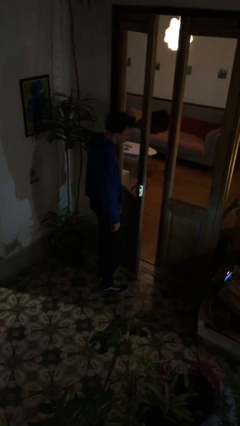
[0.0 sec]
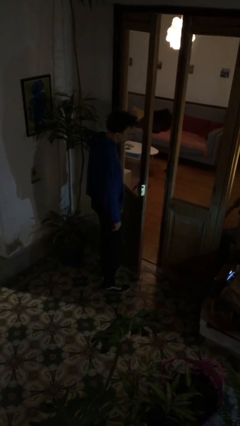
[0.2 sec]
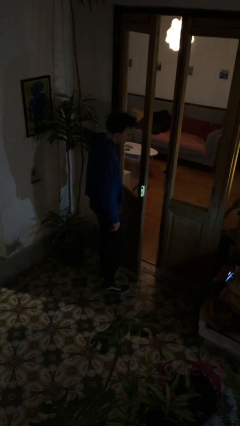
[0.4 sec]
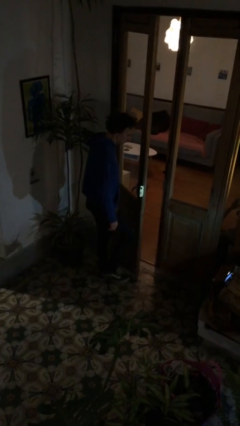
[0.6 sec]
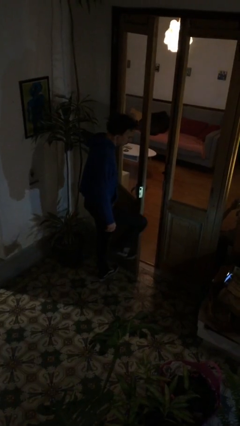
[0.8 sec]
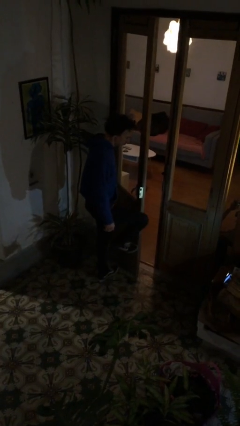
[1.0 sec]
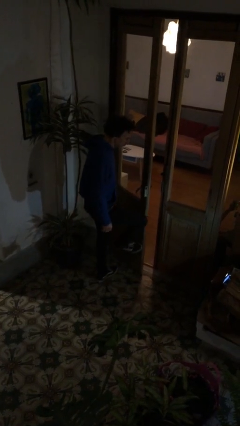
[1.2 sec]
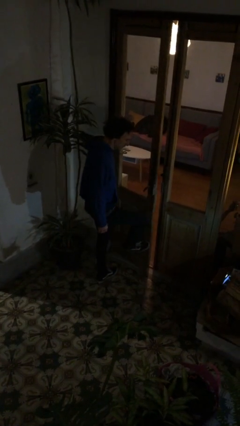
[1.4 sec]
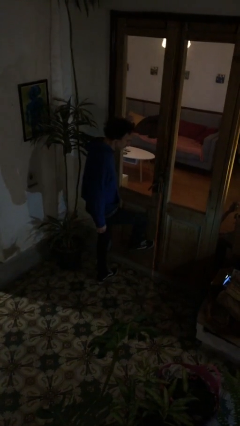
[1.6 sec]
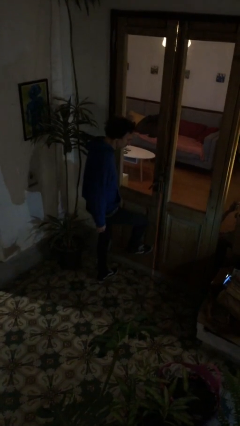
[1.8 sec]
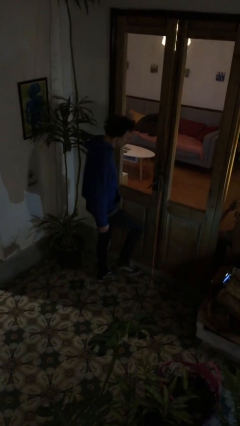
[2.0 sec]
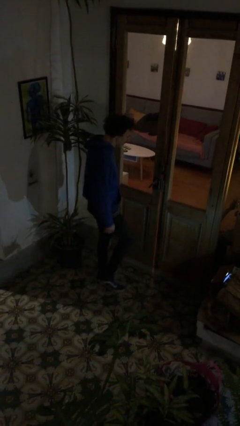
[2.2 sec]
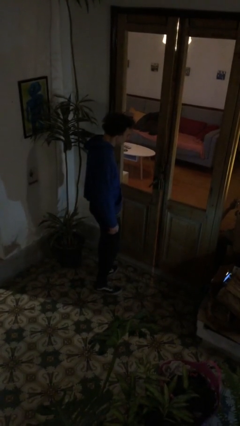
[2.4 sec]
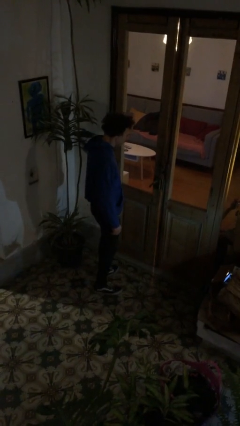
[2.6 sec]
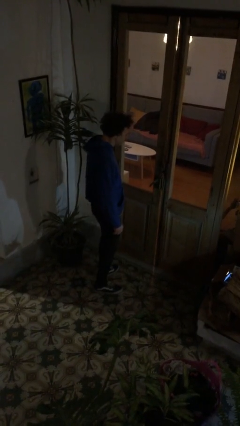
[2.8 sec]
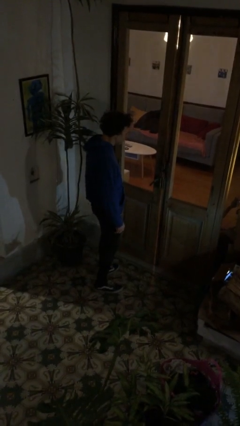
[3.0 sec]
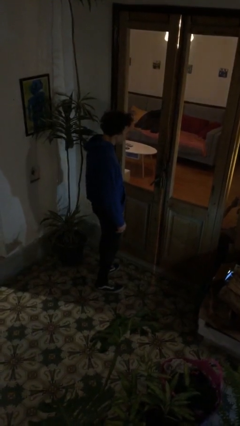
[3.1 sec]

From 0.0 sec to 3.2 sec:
person closes door with foot

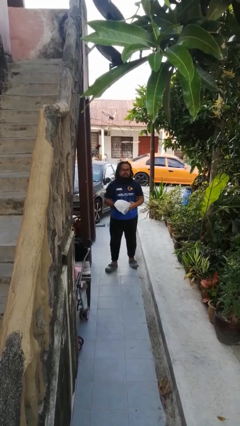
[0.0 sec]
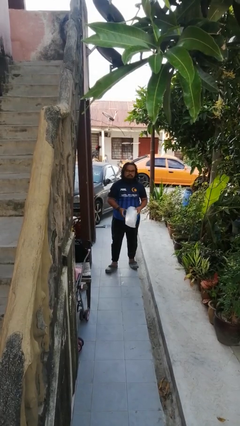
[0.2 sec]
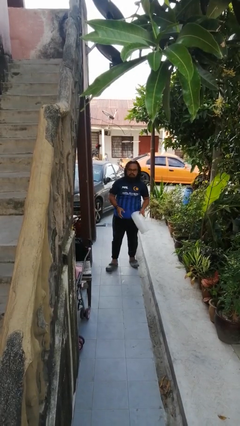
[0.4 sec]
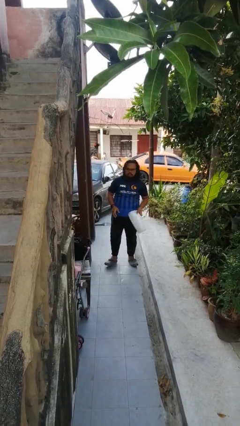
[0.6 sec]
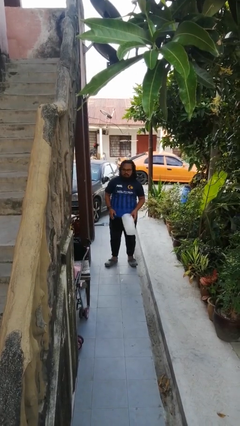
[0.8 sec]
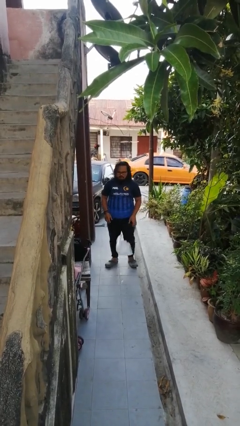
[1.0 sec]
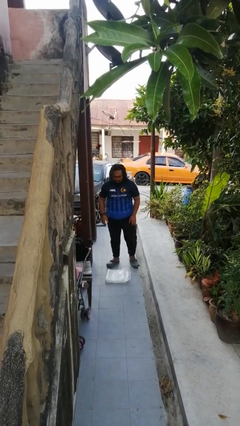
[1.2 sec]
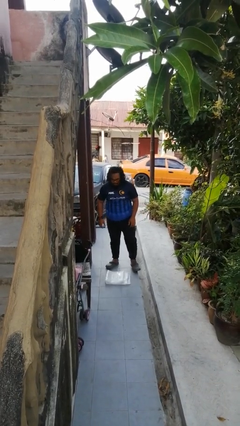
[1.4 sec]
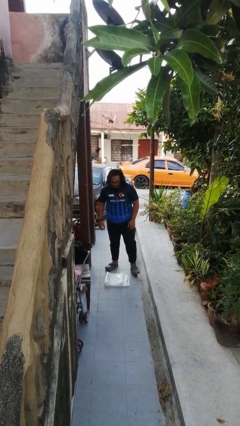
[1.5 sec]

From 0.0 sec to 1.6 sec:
person drops object

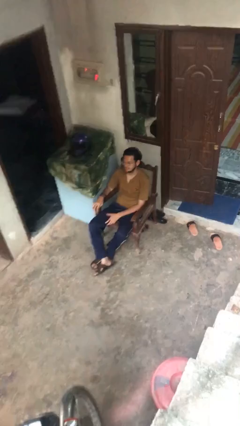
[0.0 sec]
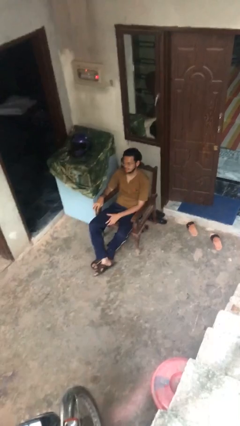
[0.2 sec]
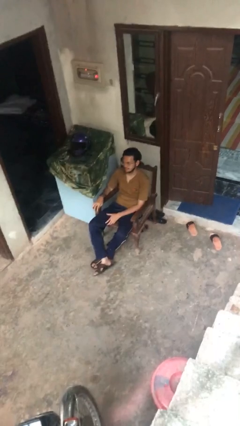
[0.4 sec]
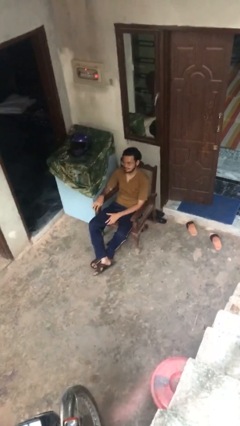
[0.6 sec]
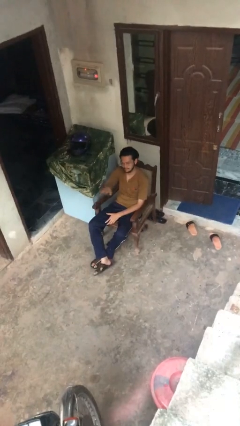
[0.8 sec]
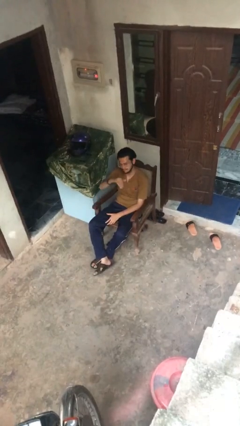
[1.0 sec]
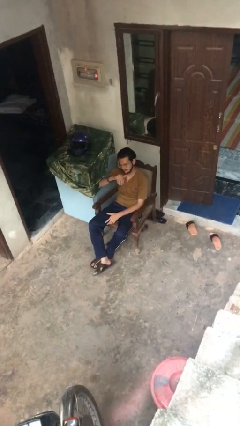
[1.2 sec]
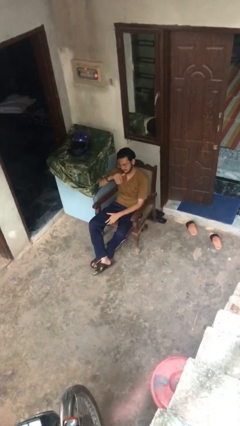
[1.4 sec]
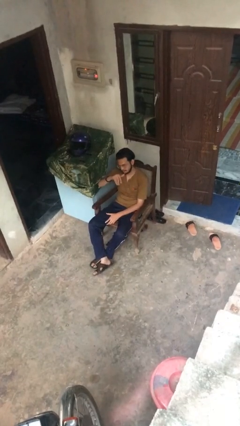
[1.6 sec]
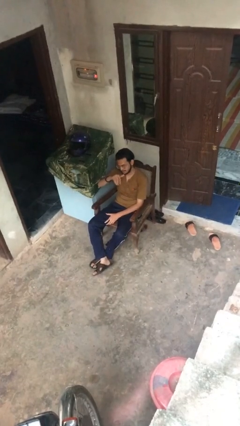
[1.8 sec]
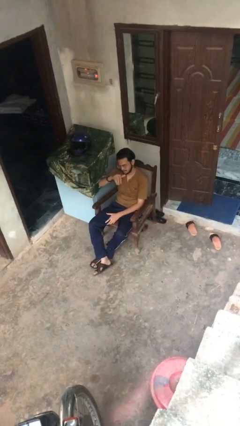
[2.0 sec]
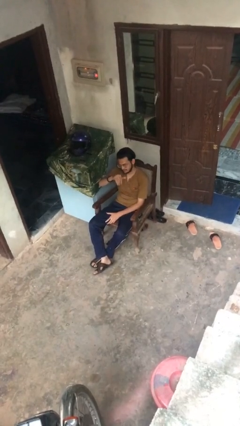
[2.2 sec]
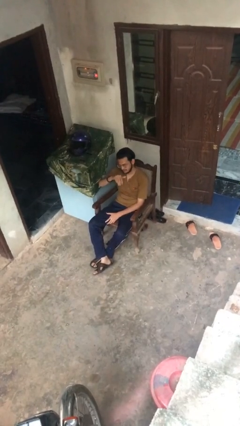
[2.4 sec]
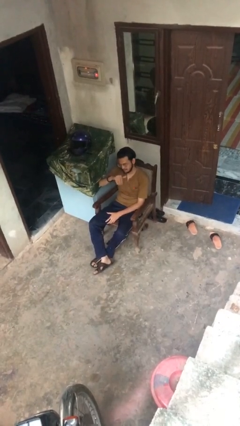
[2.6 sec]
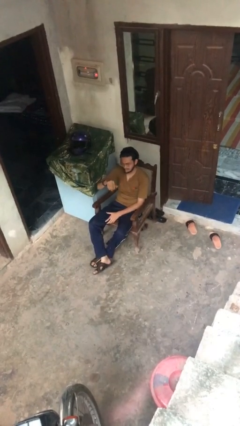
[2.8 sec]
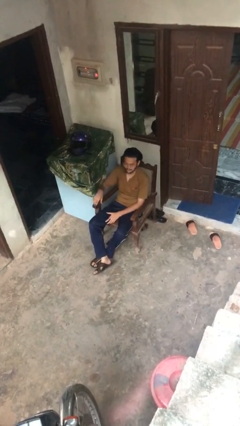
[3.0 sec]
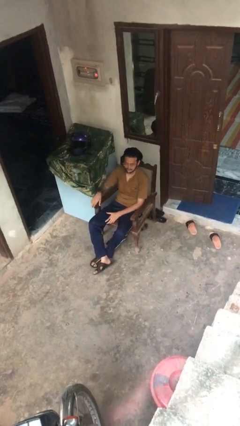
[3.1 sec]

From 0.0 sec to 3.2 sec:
person gestures come here

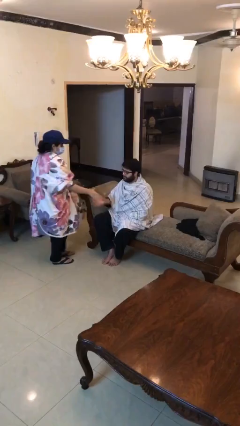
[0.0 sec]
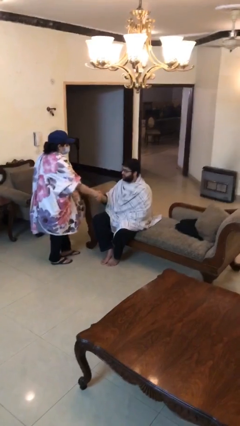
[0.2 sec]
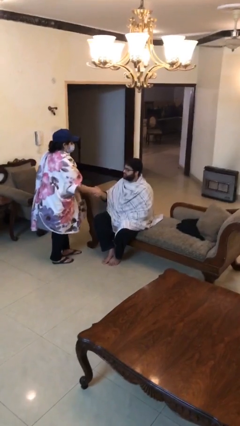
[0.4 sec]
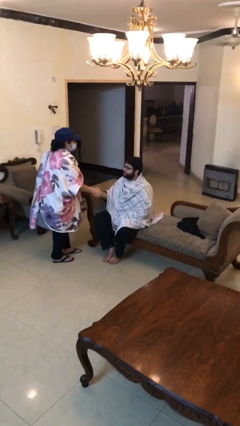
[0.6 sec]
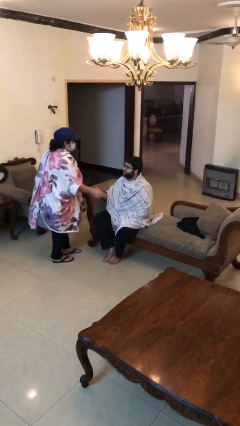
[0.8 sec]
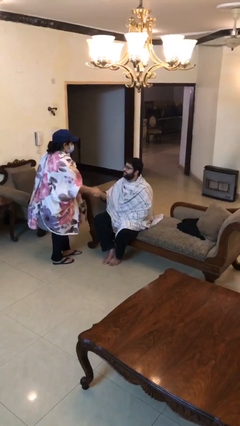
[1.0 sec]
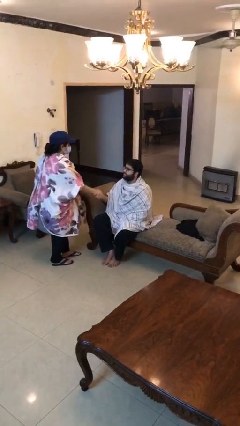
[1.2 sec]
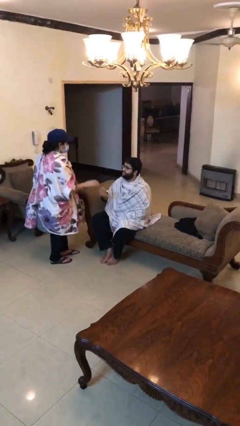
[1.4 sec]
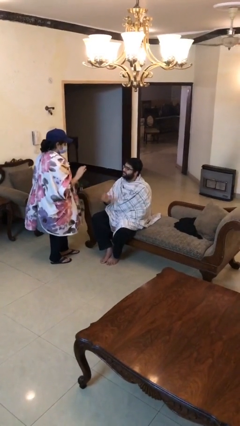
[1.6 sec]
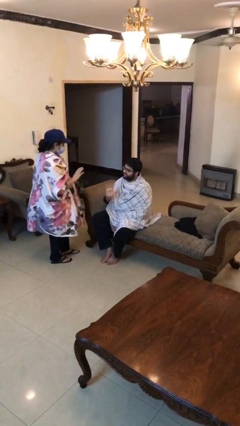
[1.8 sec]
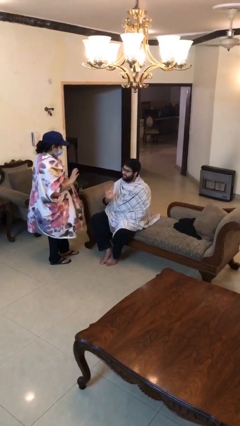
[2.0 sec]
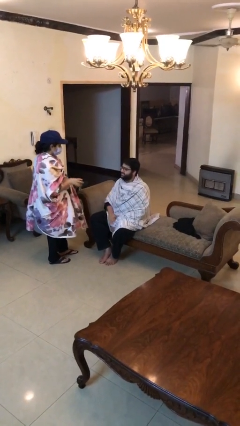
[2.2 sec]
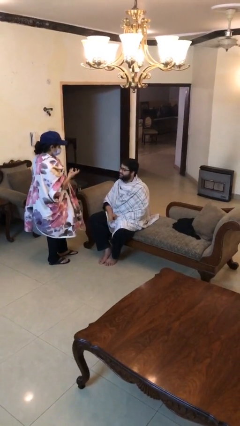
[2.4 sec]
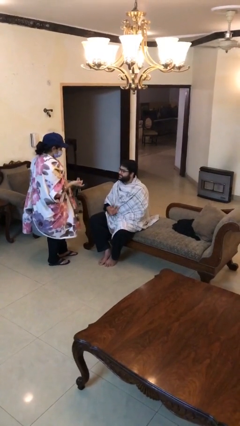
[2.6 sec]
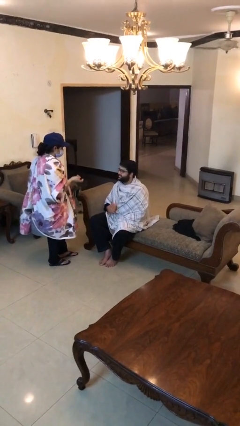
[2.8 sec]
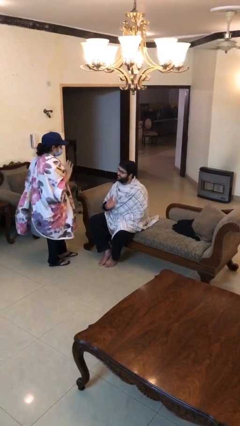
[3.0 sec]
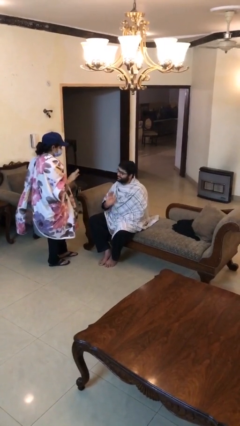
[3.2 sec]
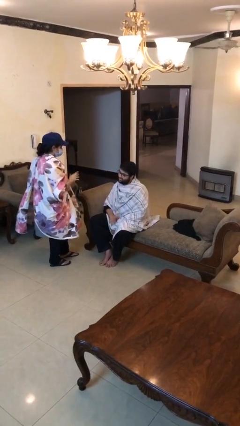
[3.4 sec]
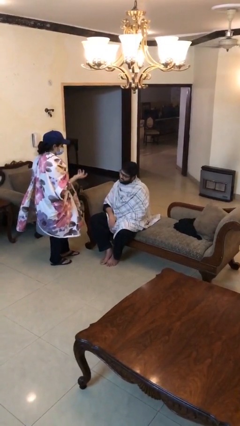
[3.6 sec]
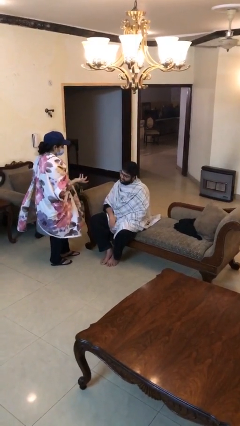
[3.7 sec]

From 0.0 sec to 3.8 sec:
person shakes hand

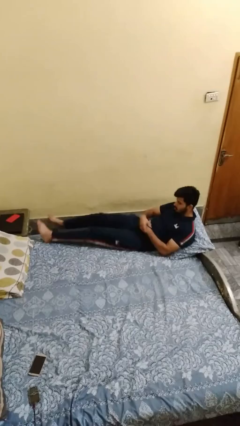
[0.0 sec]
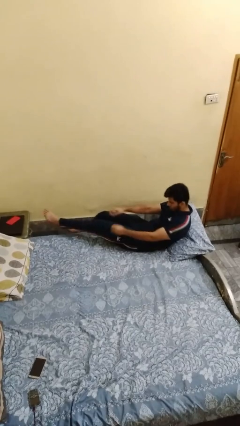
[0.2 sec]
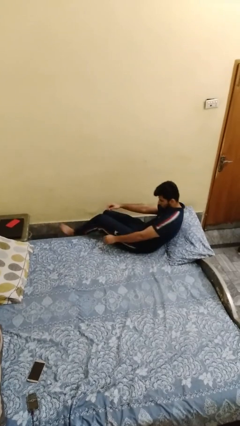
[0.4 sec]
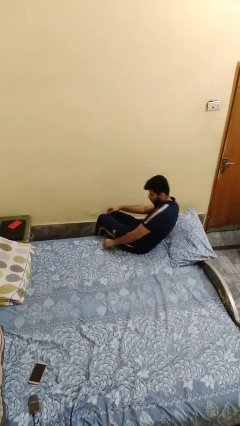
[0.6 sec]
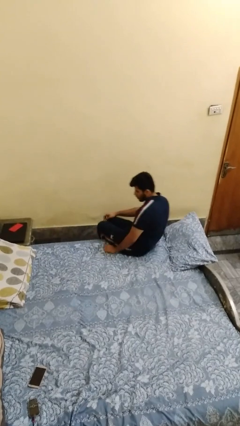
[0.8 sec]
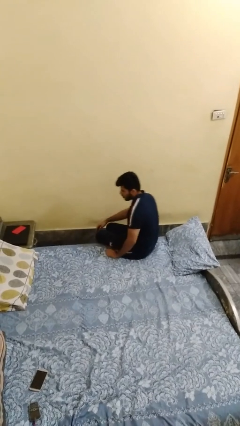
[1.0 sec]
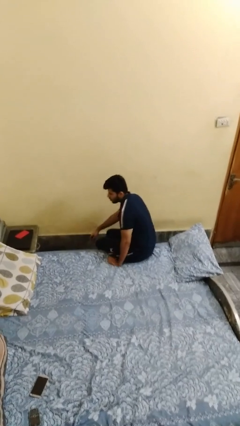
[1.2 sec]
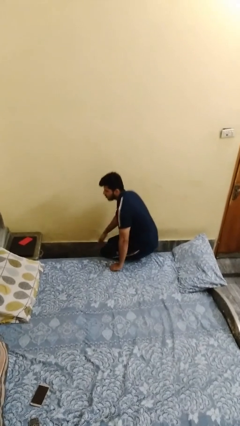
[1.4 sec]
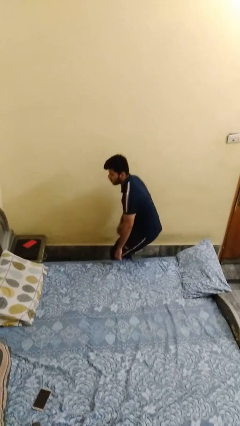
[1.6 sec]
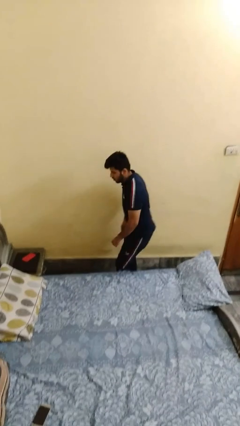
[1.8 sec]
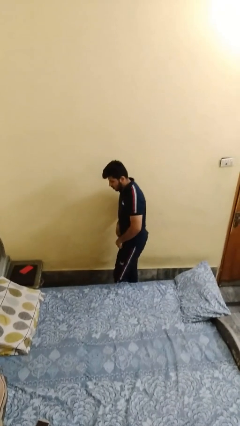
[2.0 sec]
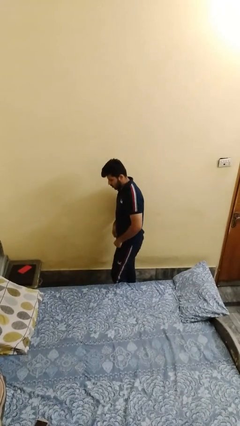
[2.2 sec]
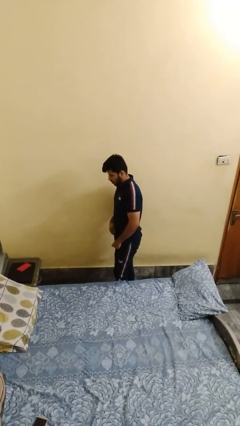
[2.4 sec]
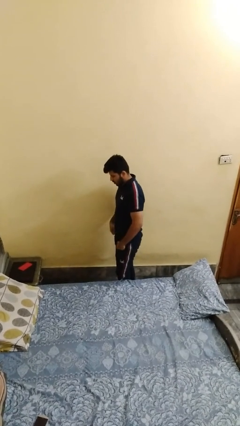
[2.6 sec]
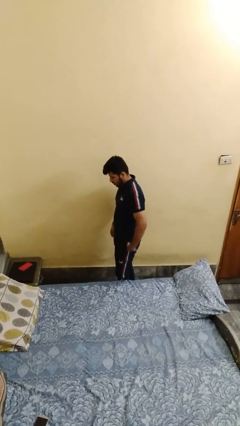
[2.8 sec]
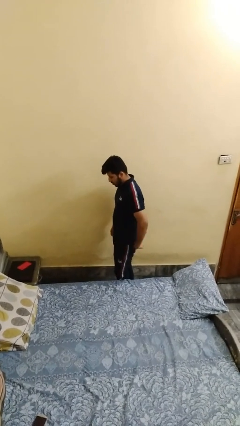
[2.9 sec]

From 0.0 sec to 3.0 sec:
person stands up

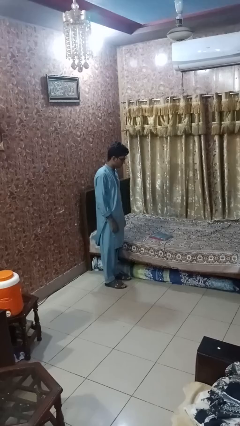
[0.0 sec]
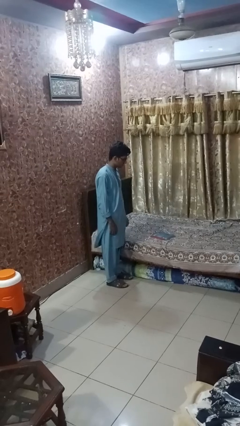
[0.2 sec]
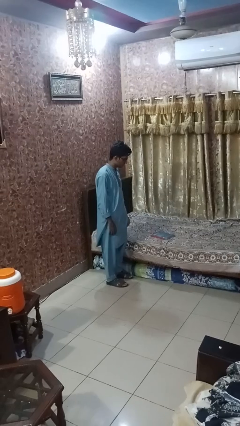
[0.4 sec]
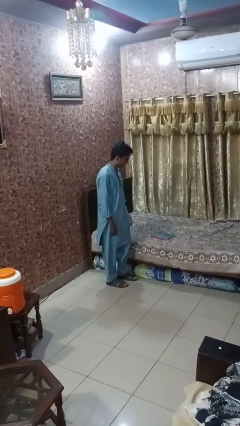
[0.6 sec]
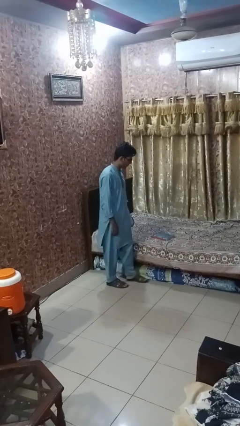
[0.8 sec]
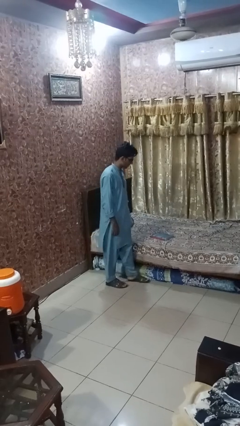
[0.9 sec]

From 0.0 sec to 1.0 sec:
person puts down object on bed

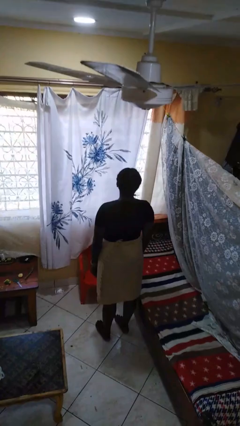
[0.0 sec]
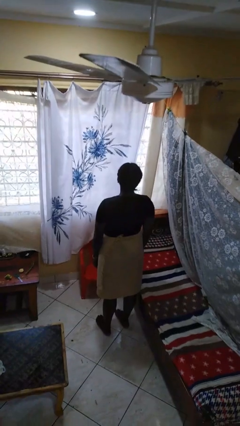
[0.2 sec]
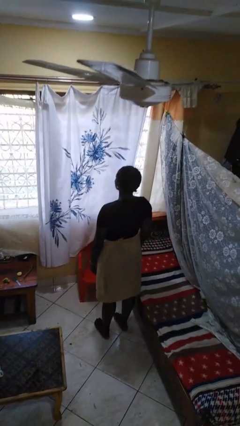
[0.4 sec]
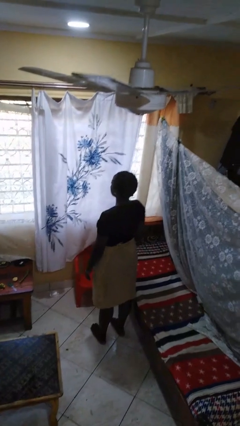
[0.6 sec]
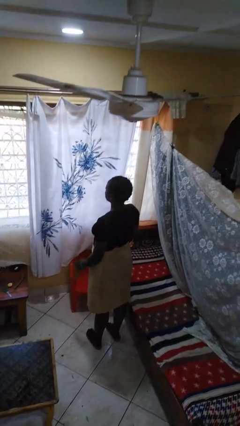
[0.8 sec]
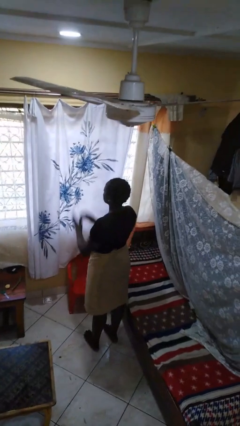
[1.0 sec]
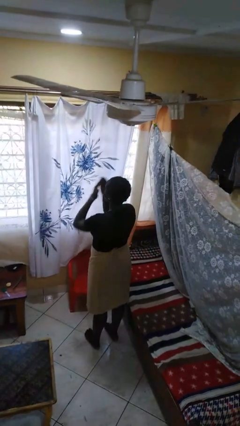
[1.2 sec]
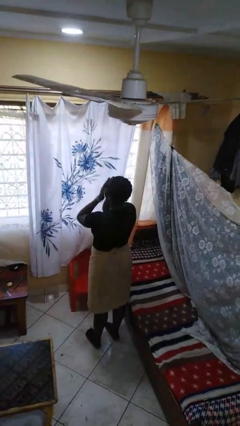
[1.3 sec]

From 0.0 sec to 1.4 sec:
person covers face with hands
